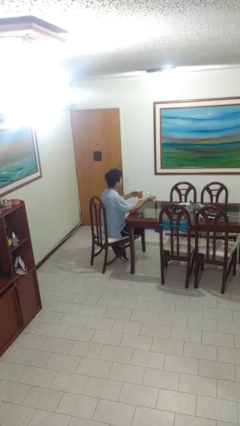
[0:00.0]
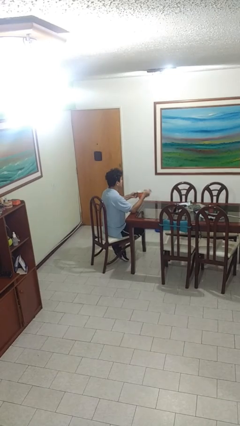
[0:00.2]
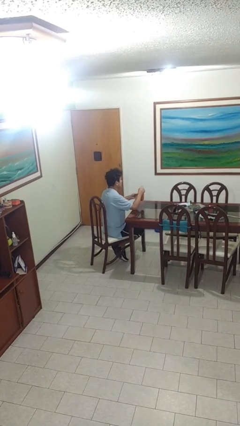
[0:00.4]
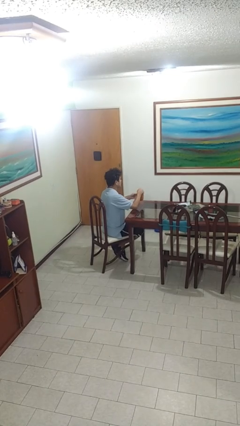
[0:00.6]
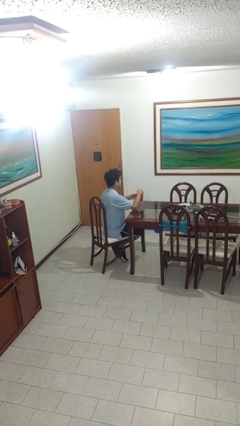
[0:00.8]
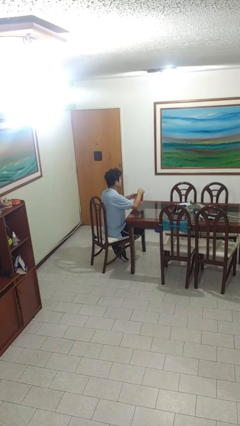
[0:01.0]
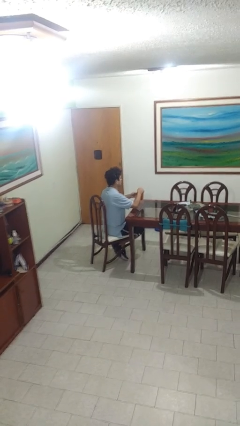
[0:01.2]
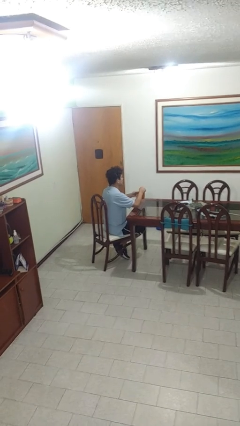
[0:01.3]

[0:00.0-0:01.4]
person stirs mug

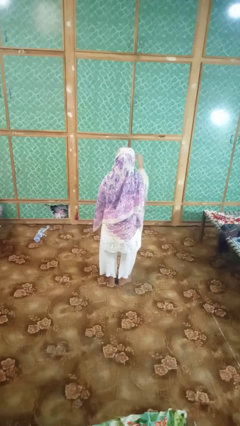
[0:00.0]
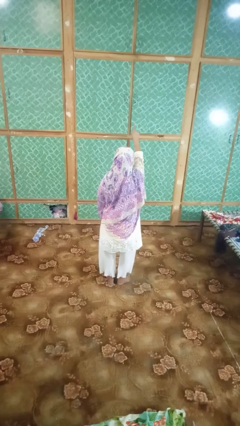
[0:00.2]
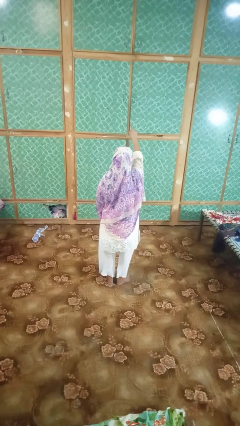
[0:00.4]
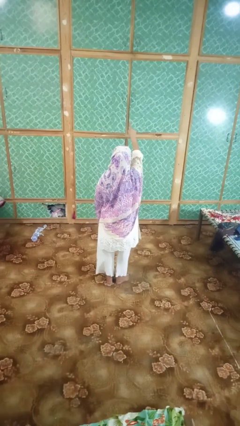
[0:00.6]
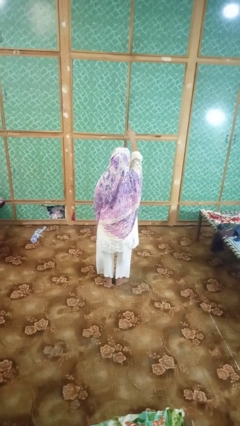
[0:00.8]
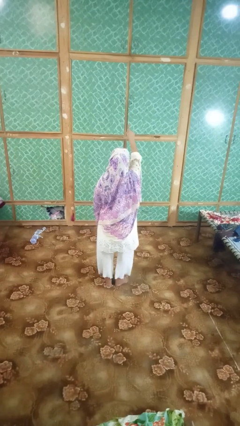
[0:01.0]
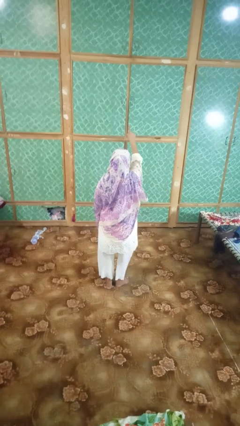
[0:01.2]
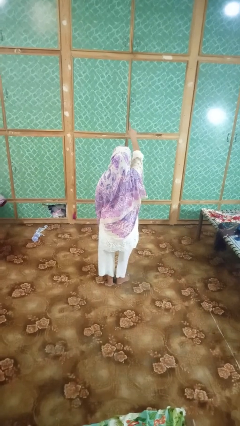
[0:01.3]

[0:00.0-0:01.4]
person gestures number one

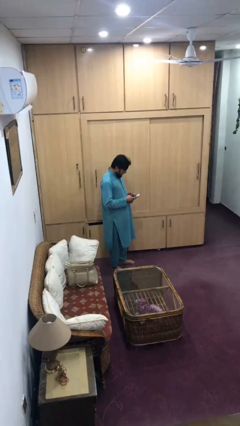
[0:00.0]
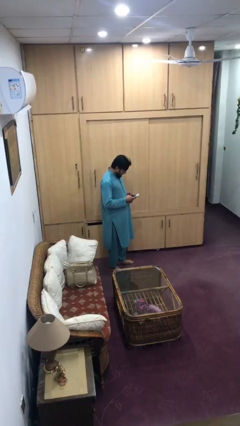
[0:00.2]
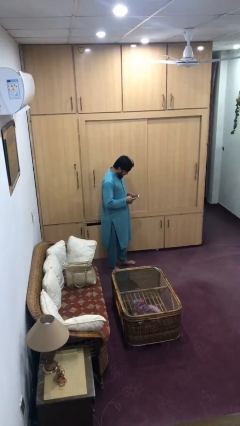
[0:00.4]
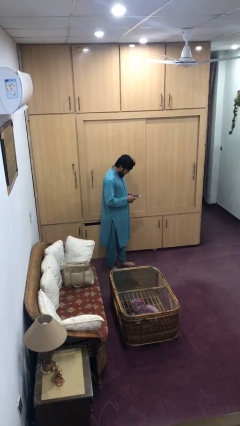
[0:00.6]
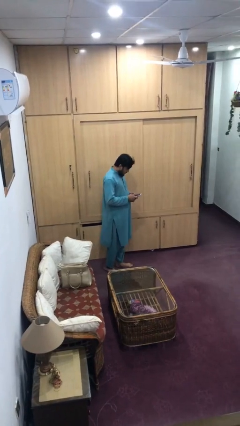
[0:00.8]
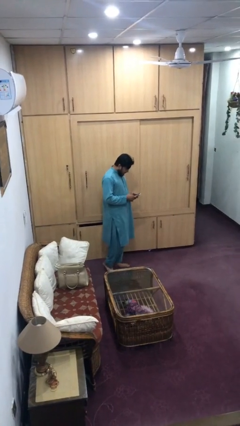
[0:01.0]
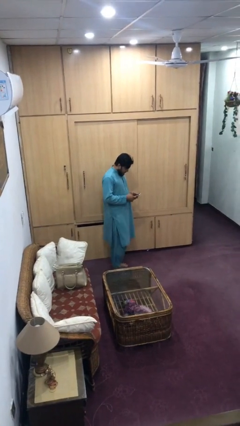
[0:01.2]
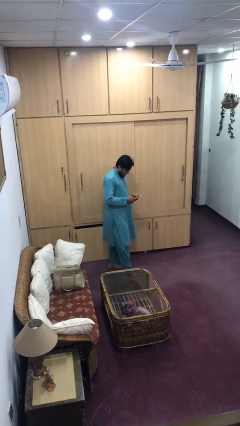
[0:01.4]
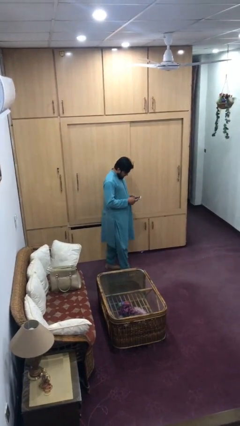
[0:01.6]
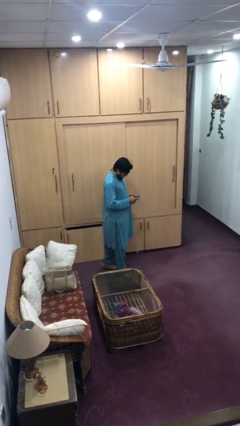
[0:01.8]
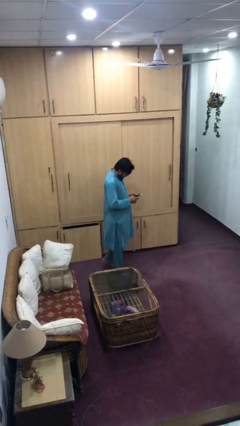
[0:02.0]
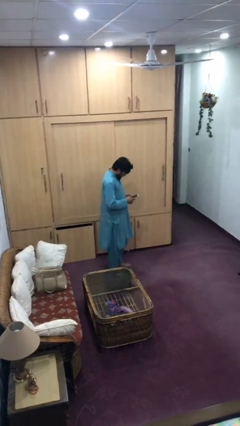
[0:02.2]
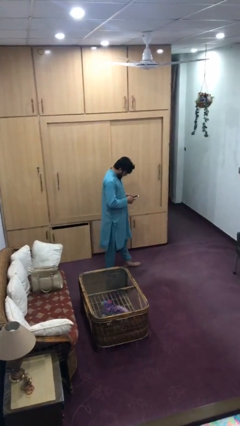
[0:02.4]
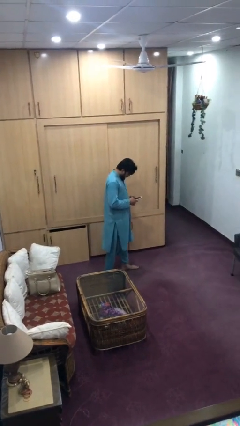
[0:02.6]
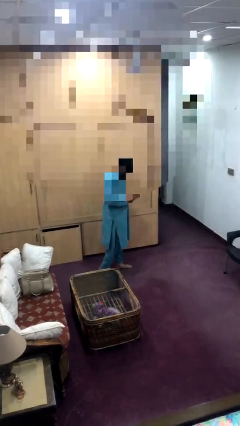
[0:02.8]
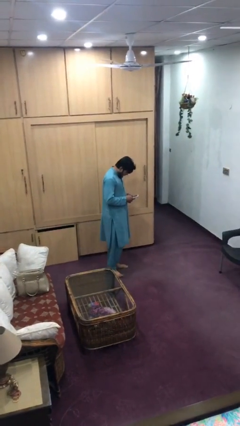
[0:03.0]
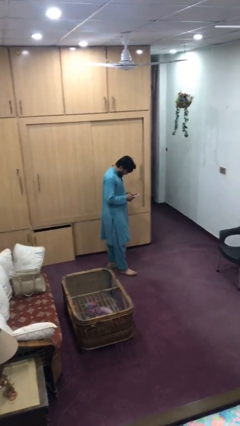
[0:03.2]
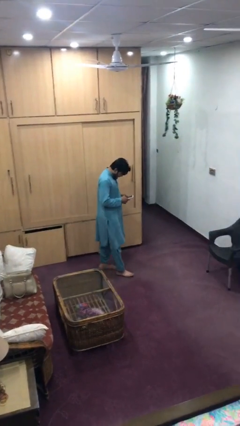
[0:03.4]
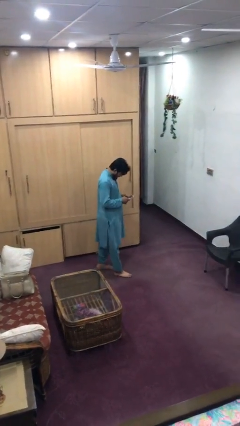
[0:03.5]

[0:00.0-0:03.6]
person texts on phone

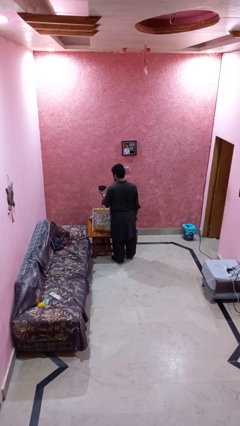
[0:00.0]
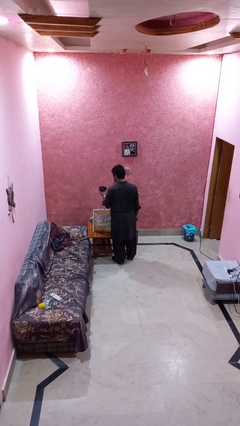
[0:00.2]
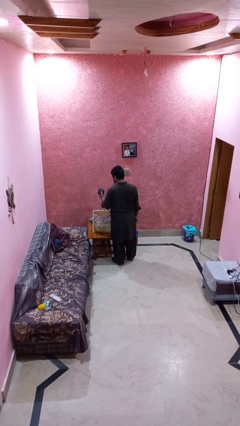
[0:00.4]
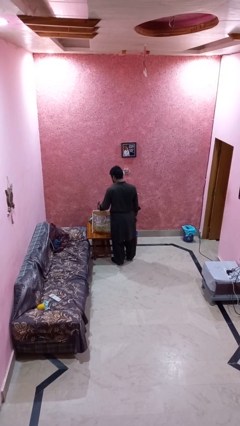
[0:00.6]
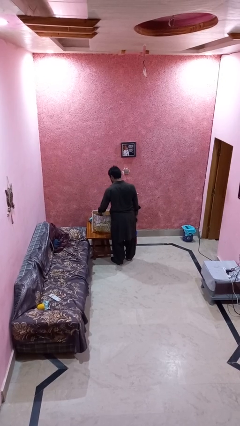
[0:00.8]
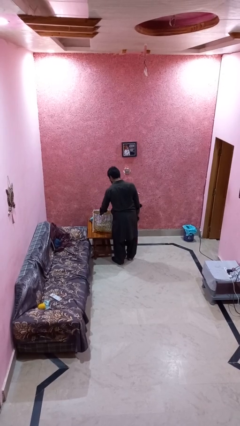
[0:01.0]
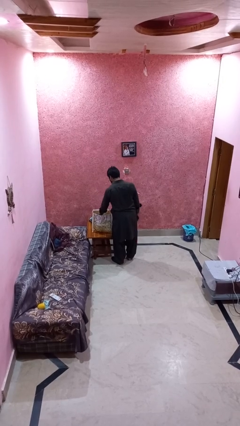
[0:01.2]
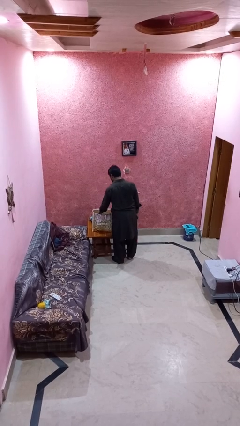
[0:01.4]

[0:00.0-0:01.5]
person puts object into bag

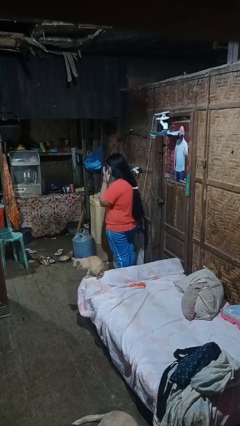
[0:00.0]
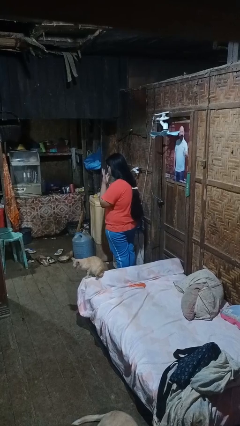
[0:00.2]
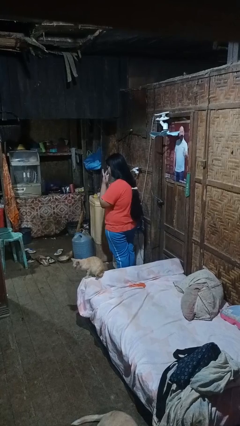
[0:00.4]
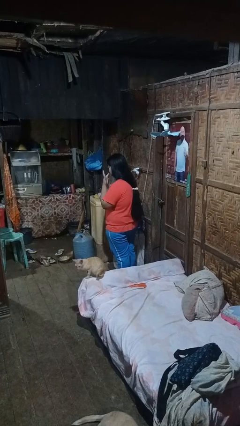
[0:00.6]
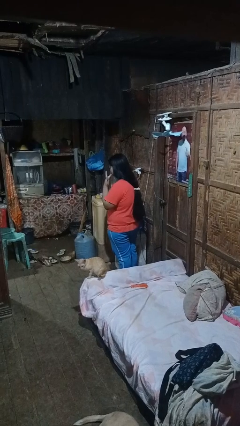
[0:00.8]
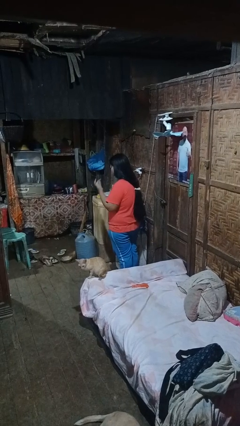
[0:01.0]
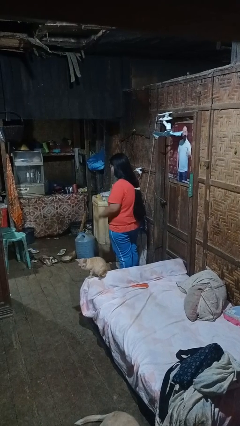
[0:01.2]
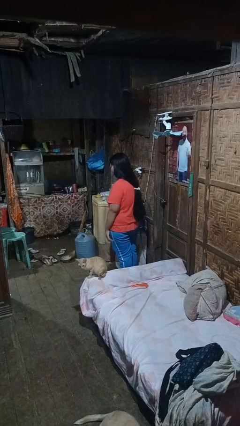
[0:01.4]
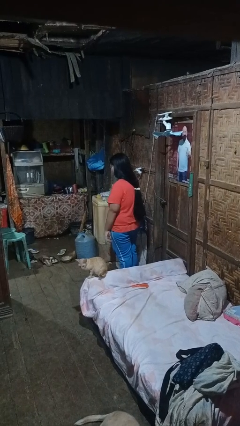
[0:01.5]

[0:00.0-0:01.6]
person licks fingers

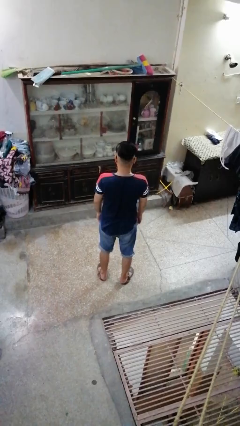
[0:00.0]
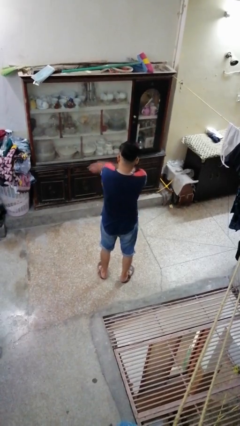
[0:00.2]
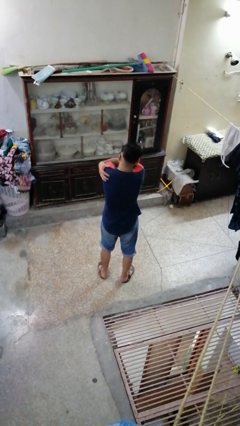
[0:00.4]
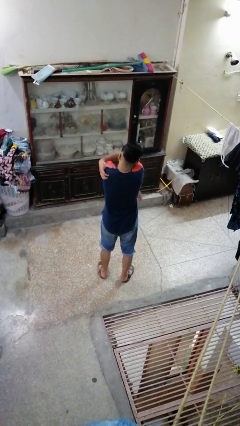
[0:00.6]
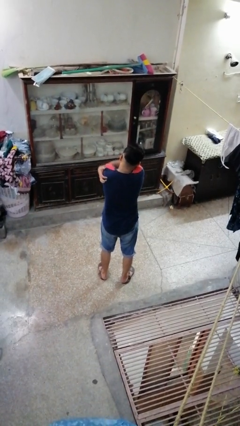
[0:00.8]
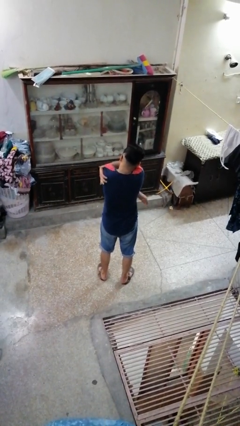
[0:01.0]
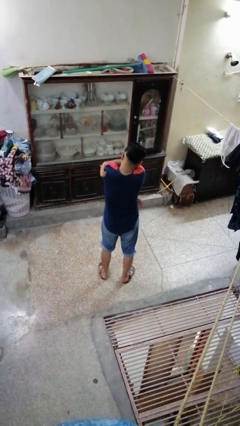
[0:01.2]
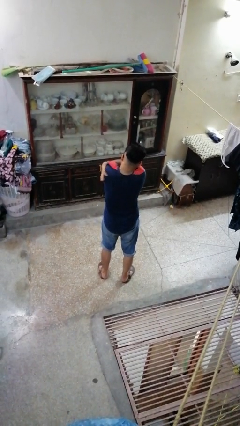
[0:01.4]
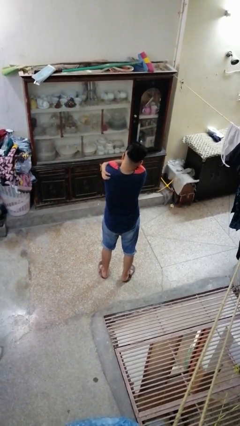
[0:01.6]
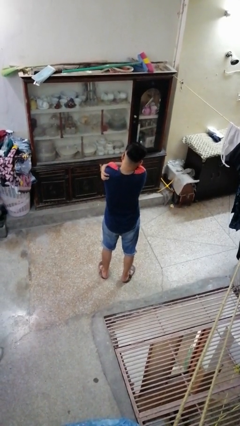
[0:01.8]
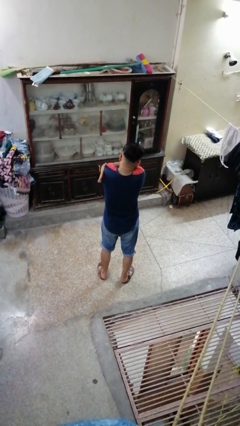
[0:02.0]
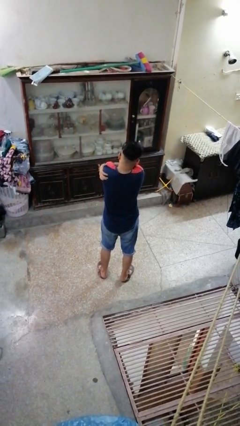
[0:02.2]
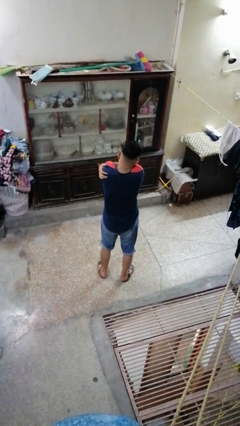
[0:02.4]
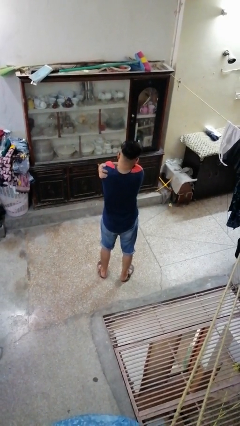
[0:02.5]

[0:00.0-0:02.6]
person swats bug

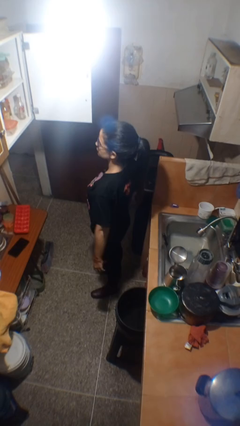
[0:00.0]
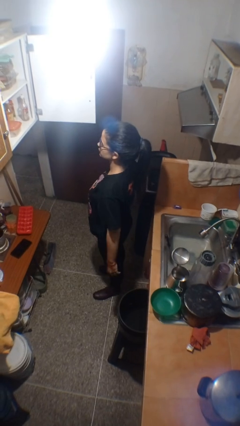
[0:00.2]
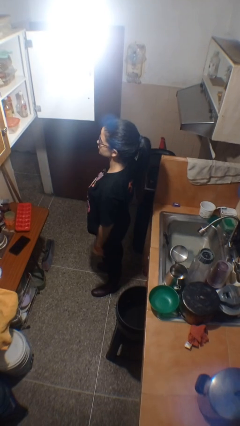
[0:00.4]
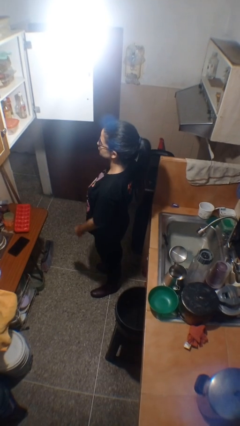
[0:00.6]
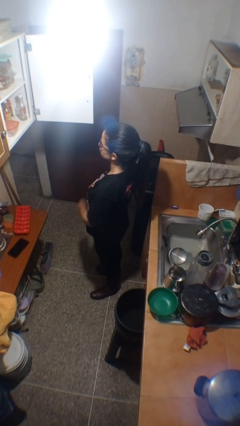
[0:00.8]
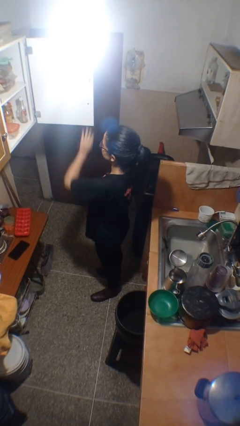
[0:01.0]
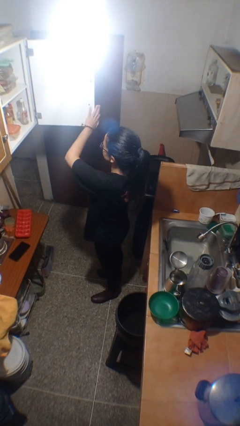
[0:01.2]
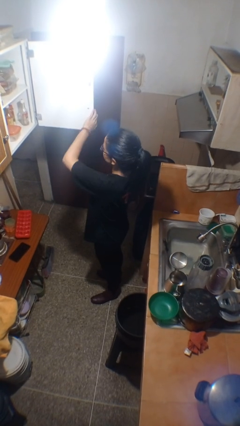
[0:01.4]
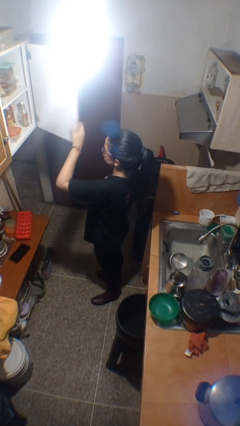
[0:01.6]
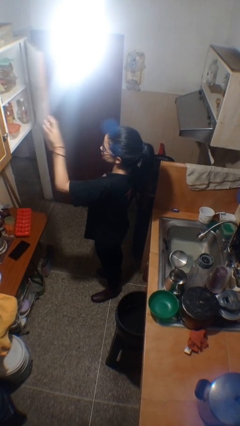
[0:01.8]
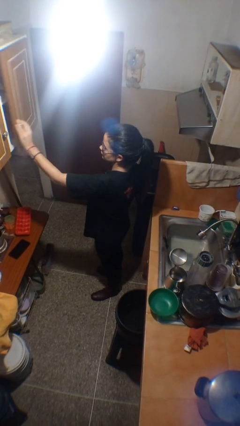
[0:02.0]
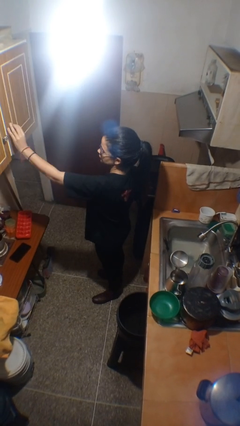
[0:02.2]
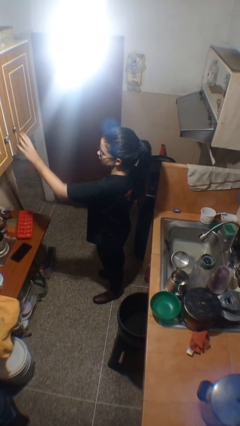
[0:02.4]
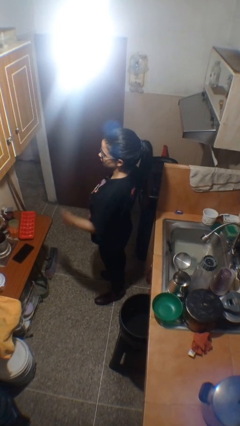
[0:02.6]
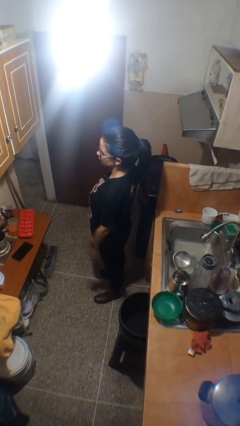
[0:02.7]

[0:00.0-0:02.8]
person closes cabinet

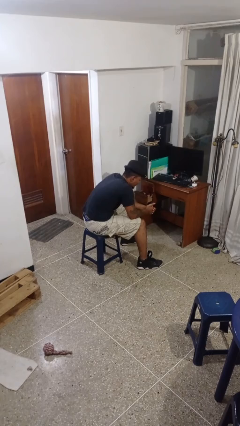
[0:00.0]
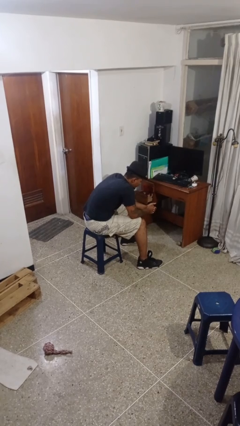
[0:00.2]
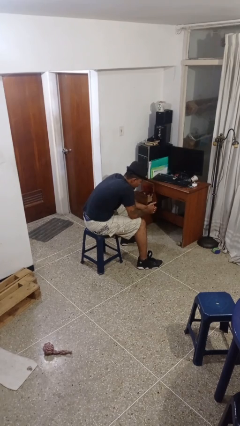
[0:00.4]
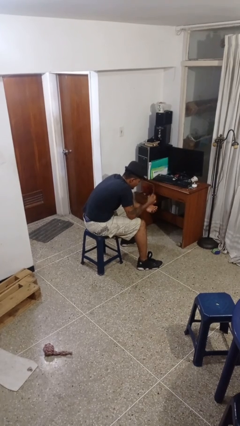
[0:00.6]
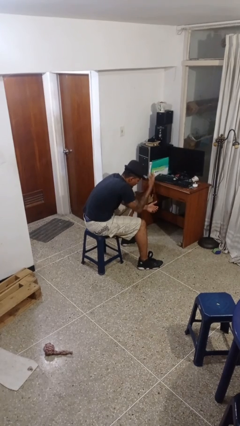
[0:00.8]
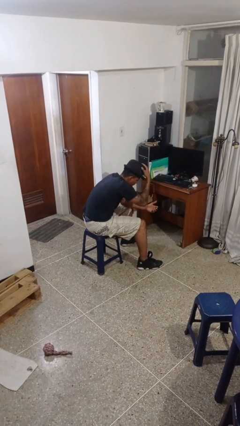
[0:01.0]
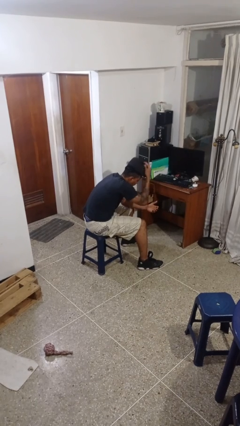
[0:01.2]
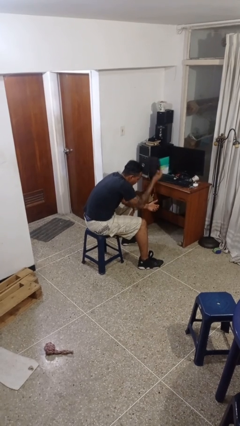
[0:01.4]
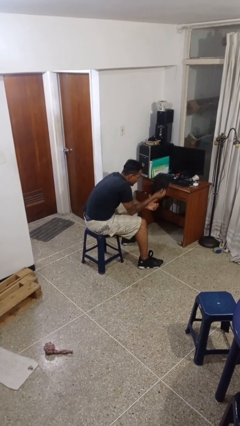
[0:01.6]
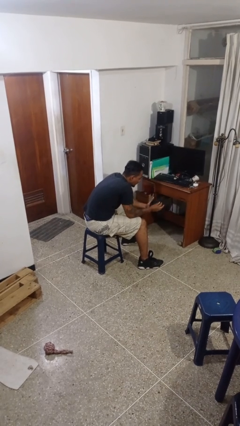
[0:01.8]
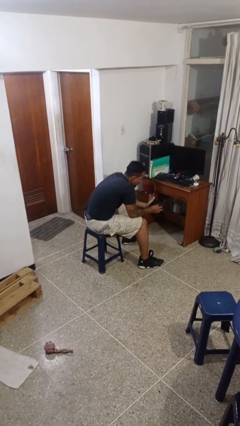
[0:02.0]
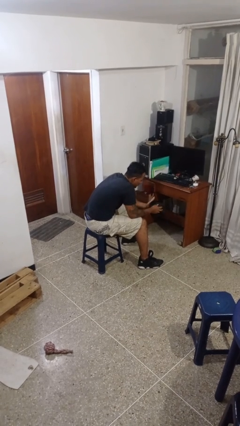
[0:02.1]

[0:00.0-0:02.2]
person takes off hat
